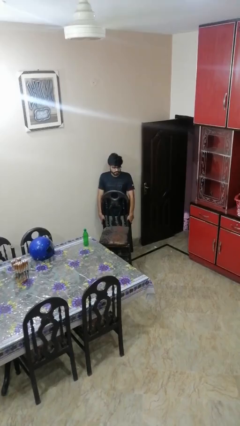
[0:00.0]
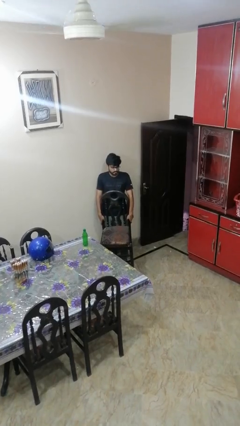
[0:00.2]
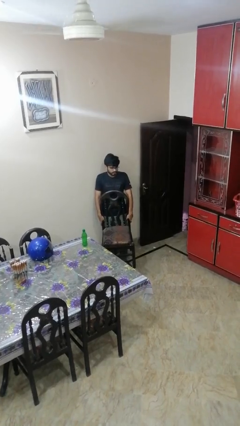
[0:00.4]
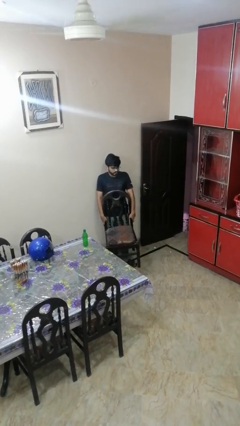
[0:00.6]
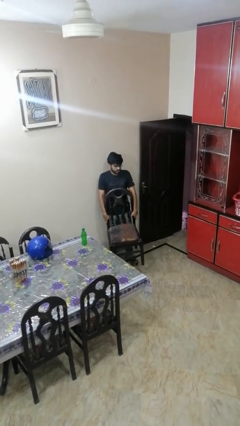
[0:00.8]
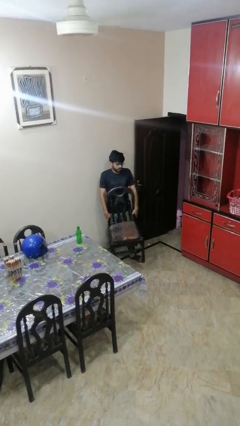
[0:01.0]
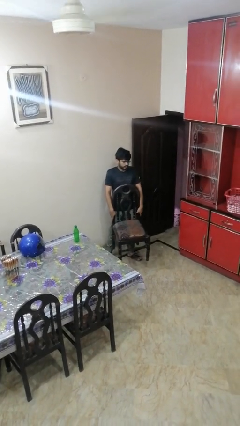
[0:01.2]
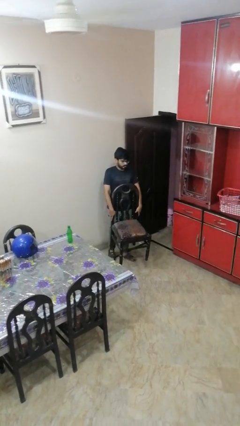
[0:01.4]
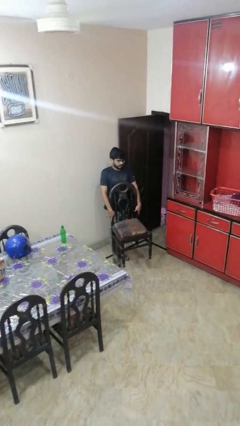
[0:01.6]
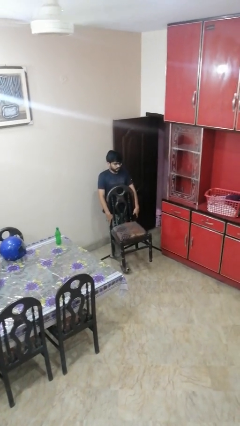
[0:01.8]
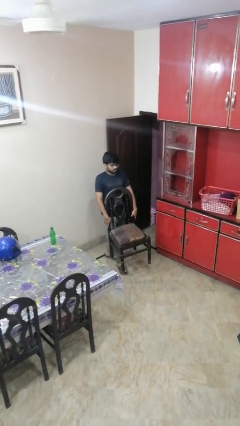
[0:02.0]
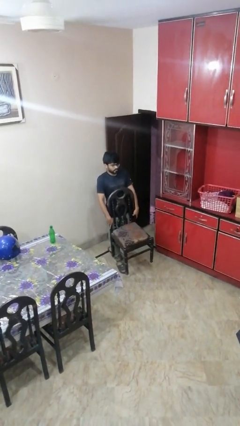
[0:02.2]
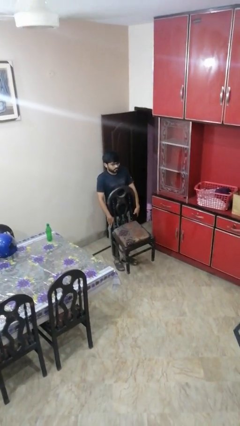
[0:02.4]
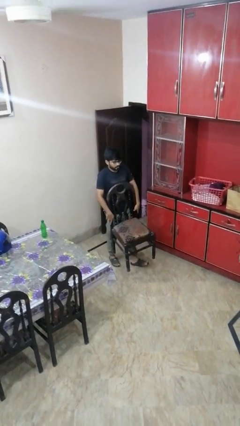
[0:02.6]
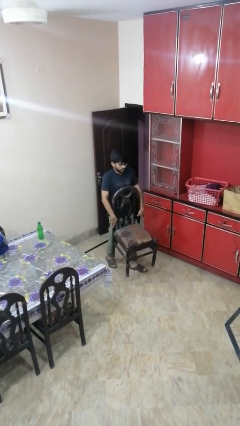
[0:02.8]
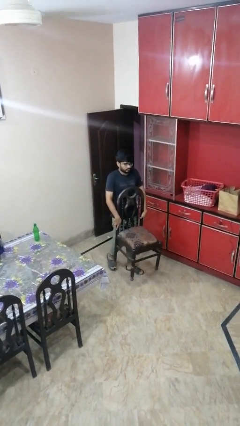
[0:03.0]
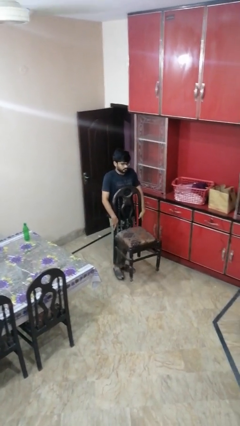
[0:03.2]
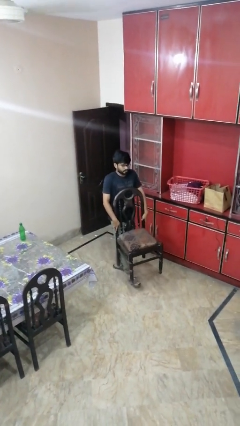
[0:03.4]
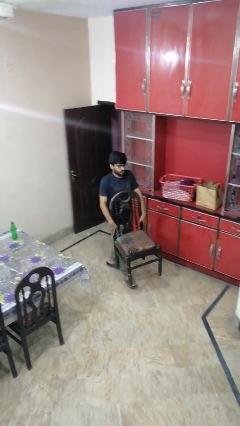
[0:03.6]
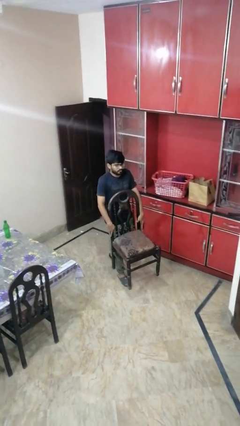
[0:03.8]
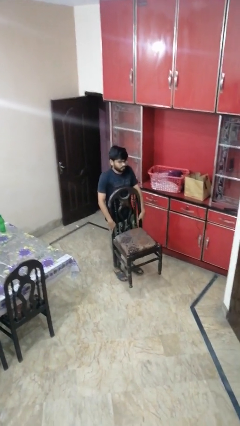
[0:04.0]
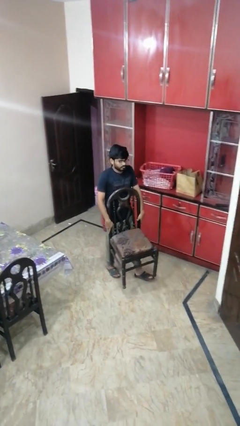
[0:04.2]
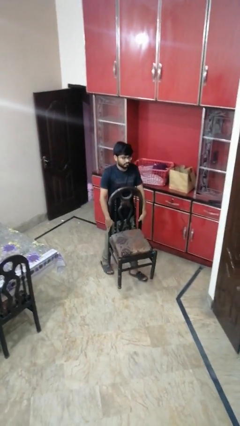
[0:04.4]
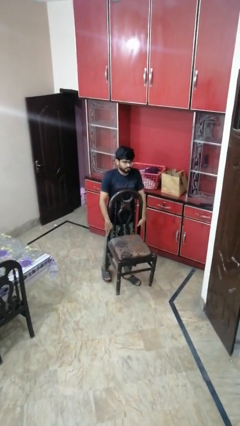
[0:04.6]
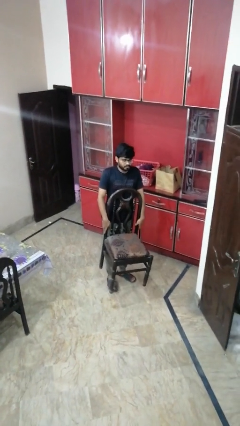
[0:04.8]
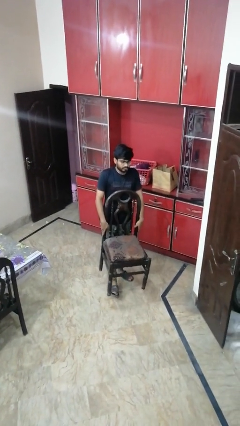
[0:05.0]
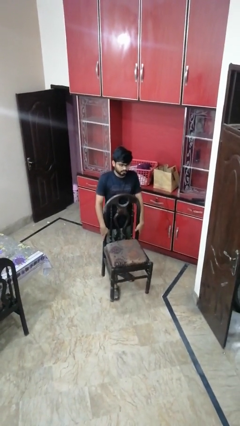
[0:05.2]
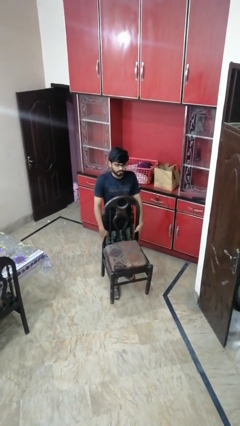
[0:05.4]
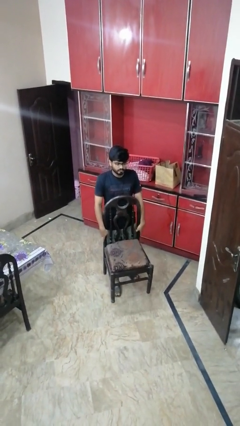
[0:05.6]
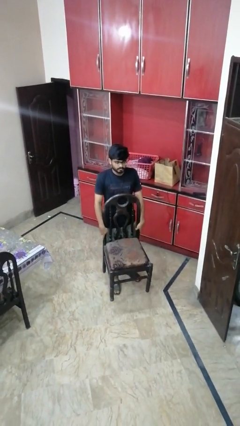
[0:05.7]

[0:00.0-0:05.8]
person carries furniture

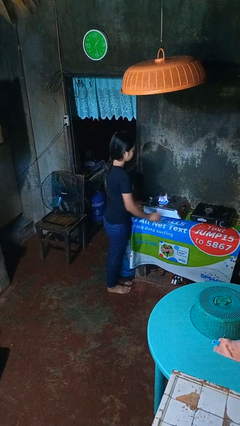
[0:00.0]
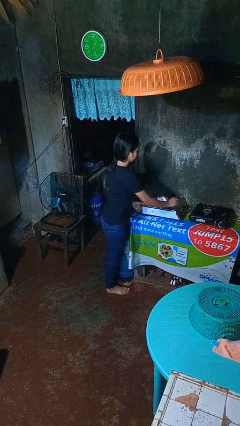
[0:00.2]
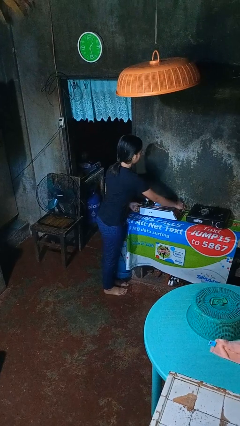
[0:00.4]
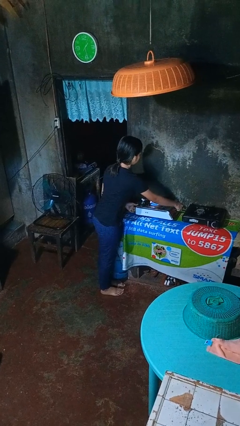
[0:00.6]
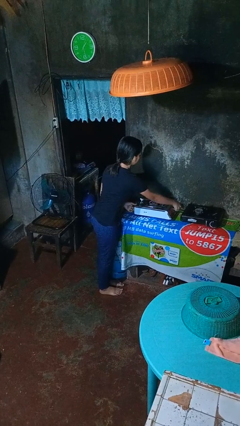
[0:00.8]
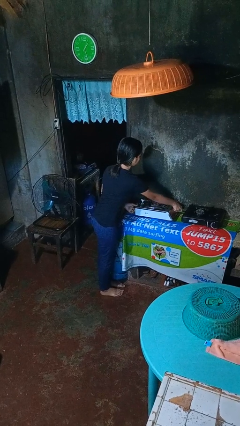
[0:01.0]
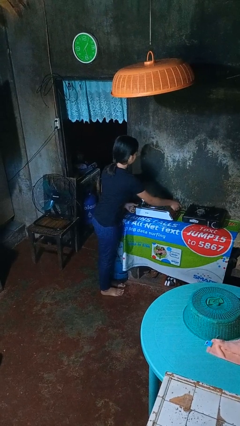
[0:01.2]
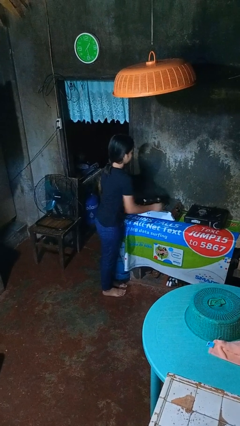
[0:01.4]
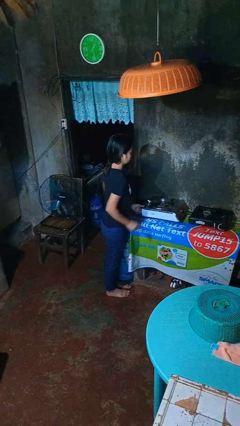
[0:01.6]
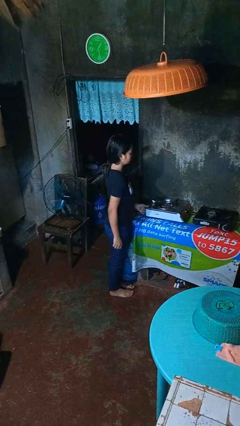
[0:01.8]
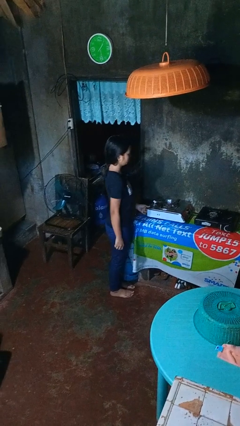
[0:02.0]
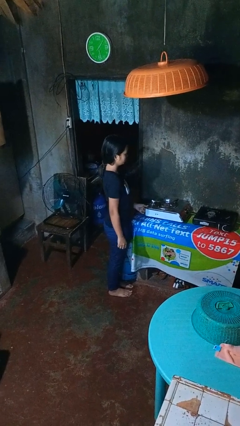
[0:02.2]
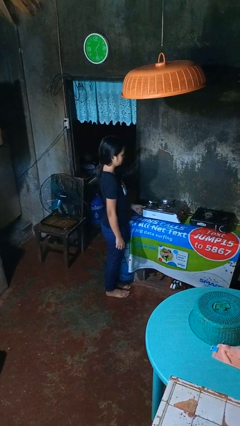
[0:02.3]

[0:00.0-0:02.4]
person turns off stovetop

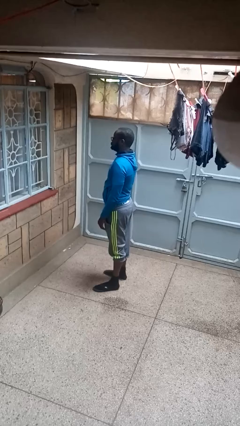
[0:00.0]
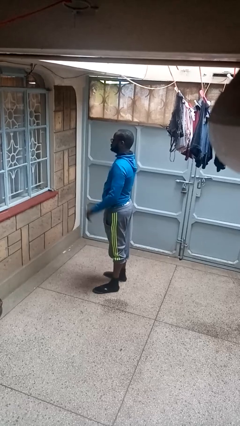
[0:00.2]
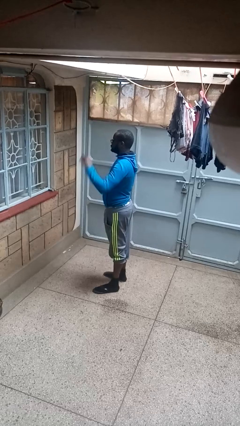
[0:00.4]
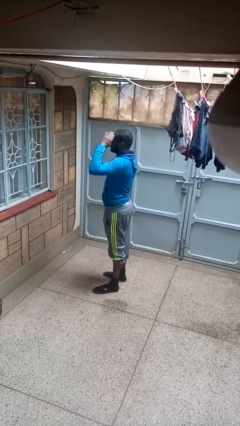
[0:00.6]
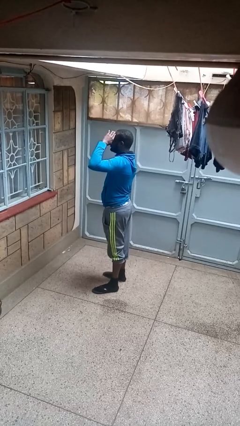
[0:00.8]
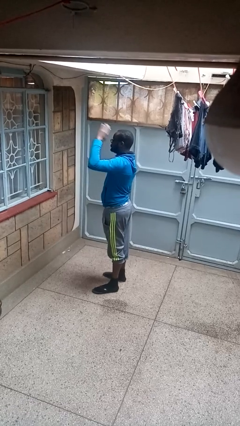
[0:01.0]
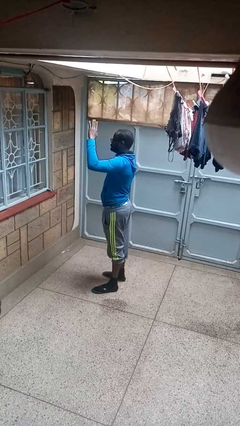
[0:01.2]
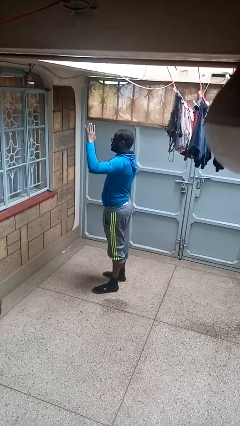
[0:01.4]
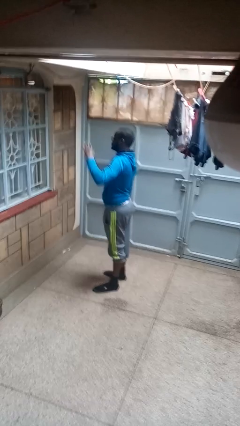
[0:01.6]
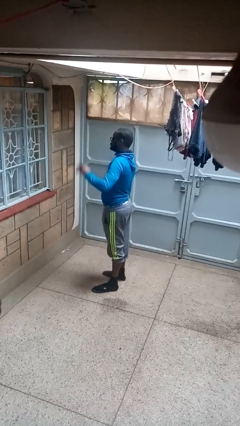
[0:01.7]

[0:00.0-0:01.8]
person salutes

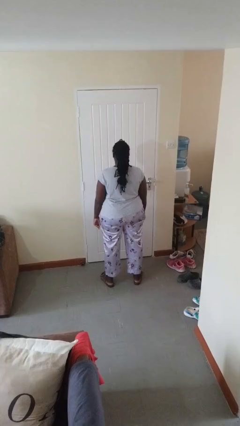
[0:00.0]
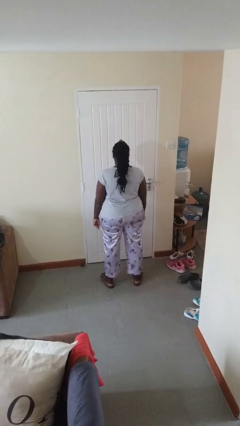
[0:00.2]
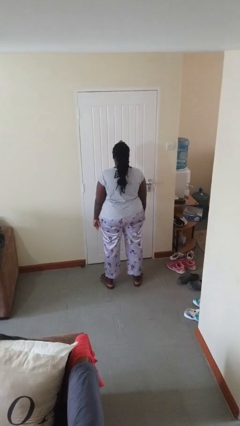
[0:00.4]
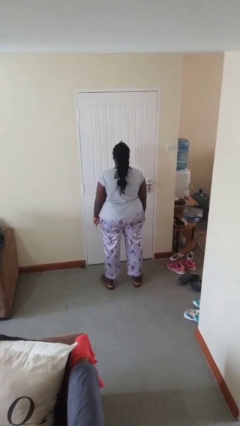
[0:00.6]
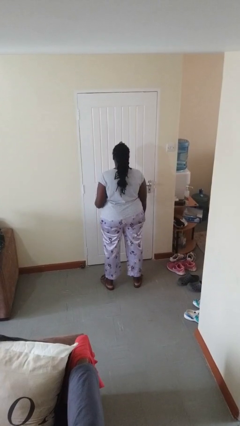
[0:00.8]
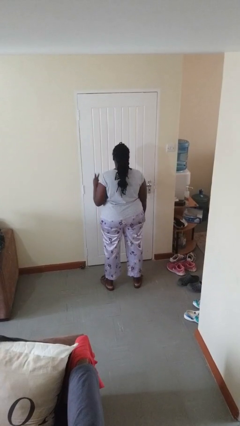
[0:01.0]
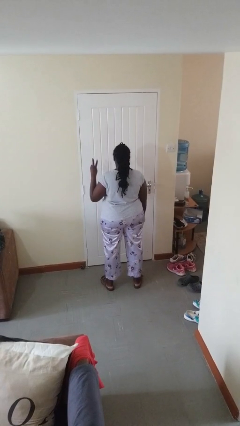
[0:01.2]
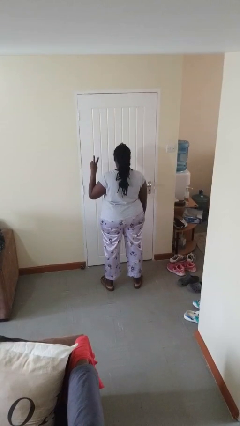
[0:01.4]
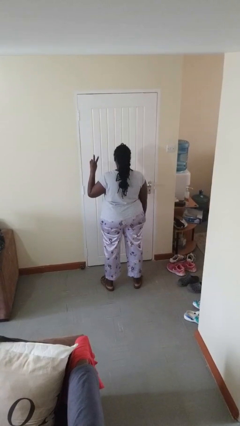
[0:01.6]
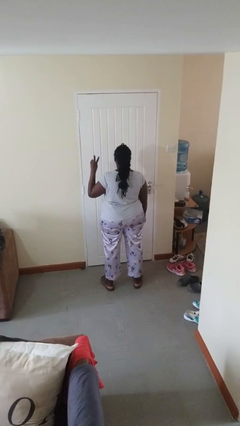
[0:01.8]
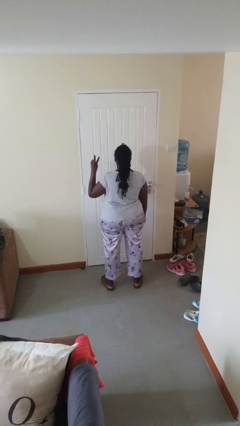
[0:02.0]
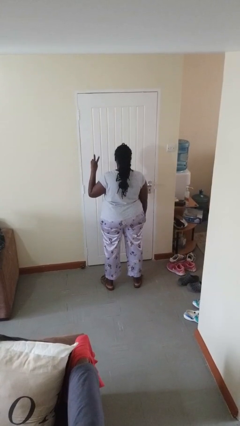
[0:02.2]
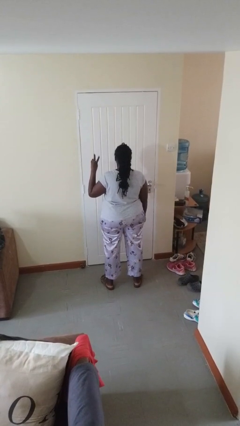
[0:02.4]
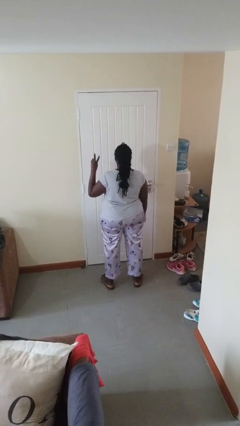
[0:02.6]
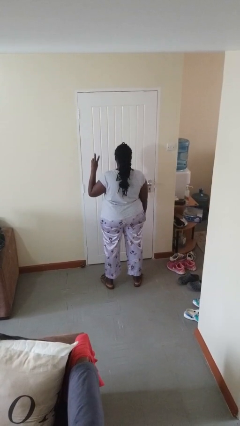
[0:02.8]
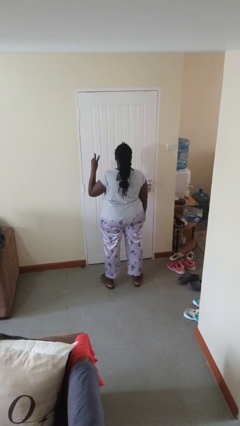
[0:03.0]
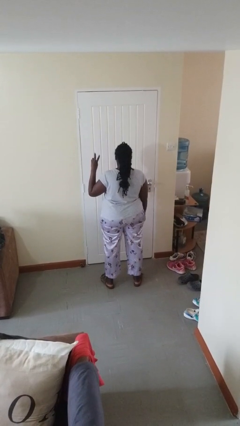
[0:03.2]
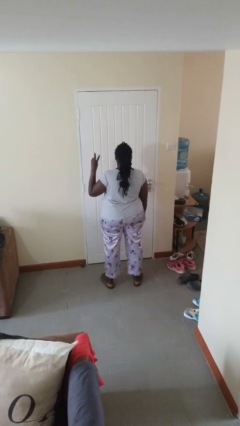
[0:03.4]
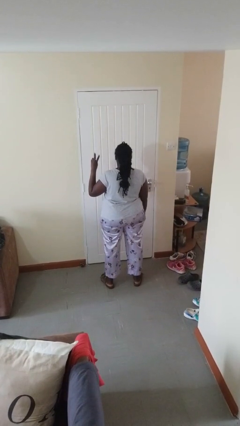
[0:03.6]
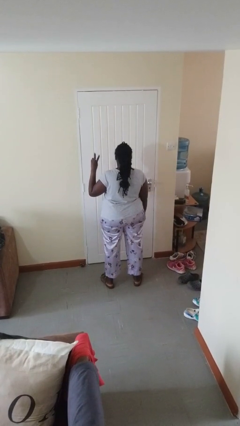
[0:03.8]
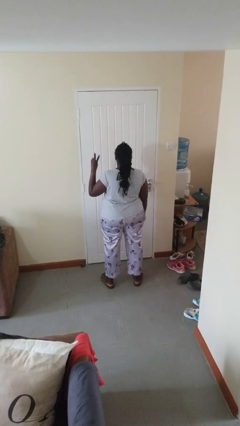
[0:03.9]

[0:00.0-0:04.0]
person gestures peace

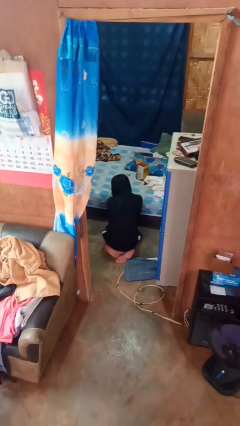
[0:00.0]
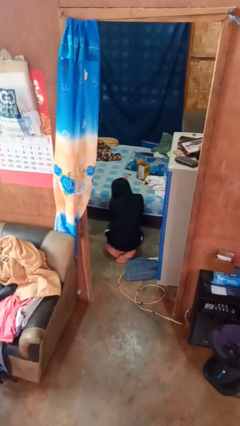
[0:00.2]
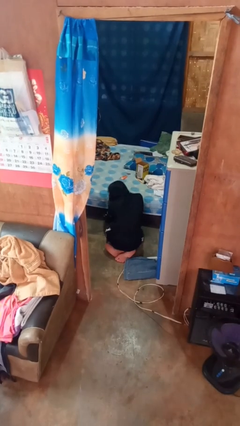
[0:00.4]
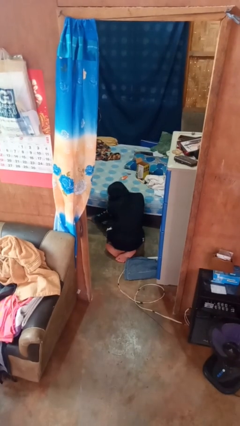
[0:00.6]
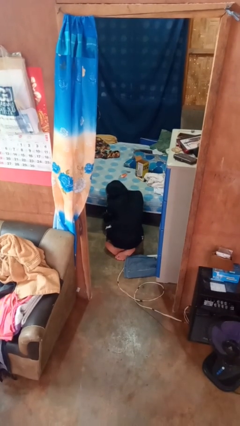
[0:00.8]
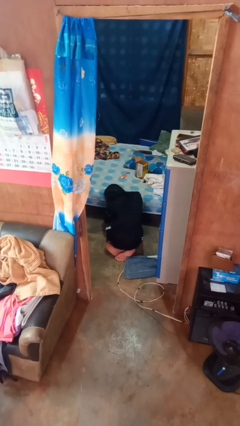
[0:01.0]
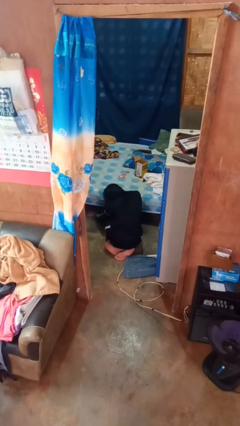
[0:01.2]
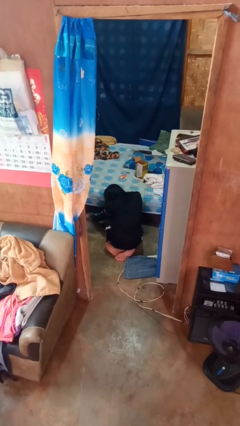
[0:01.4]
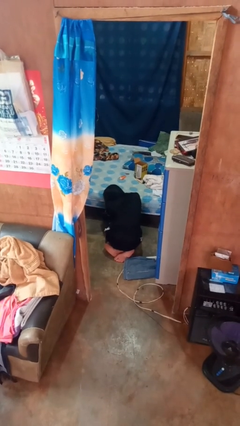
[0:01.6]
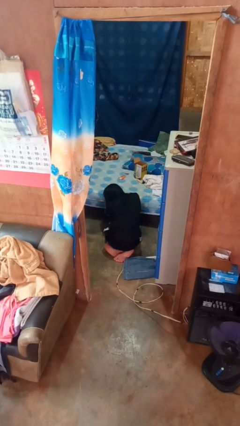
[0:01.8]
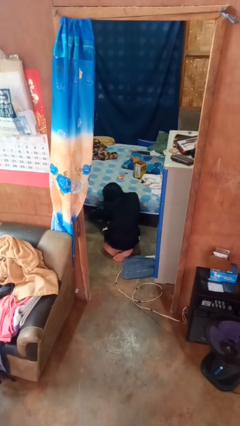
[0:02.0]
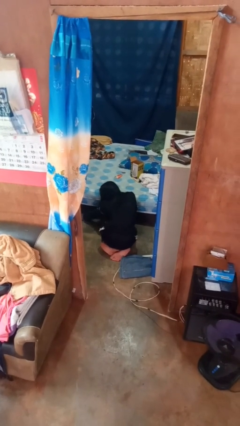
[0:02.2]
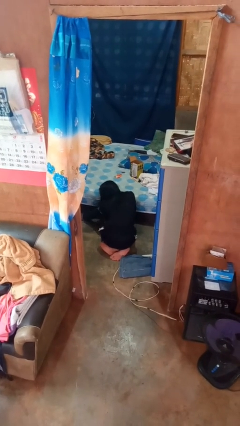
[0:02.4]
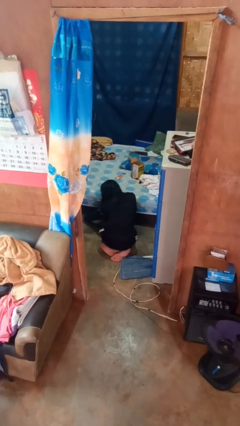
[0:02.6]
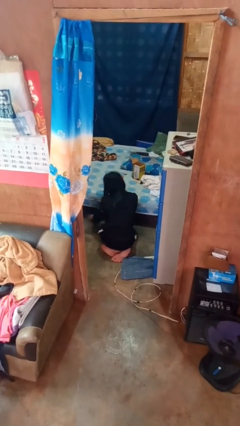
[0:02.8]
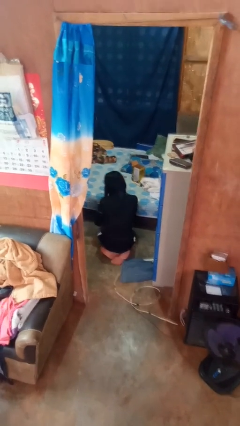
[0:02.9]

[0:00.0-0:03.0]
person searches under bed

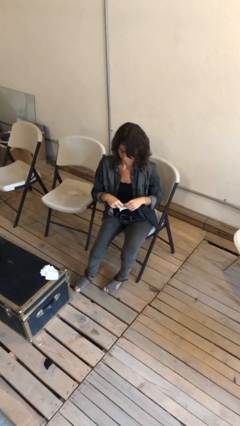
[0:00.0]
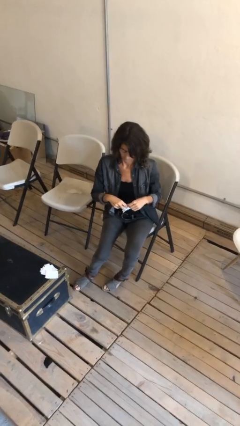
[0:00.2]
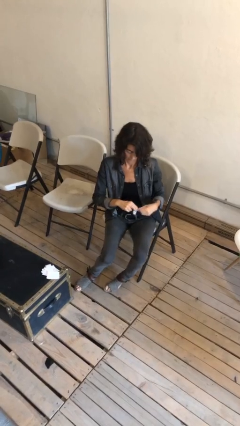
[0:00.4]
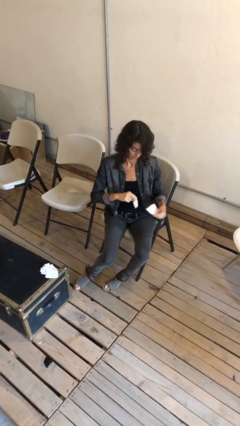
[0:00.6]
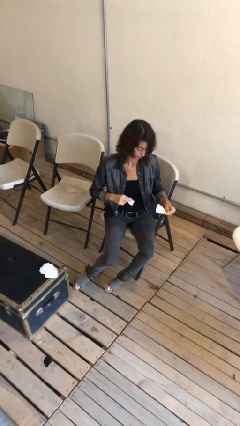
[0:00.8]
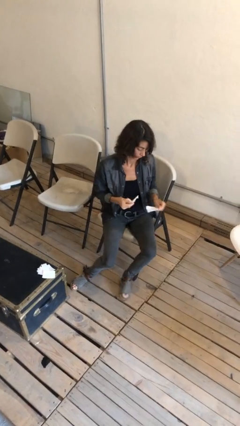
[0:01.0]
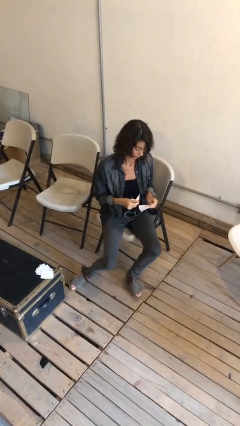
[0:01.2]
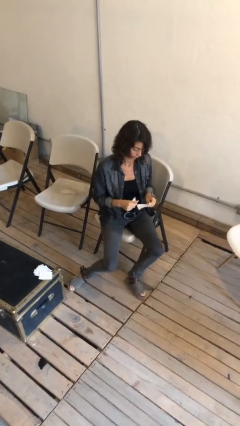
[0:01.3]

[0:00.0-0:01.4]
person tears paper
